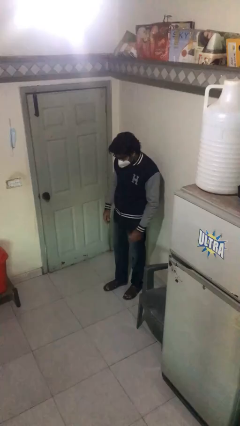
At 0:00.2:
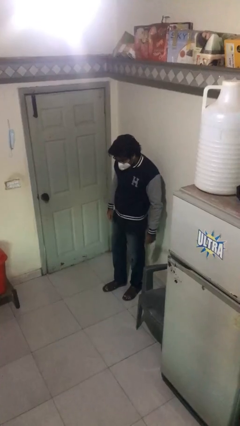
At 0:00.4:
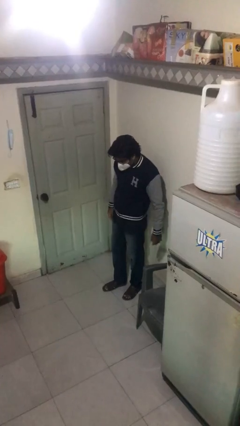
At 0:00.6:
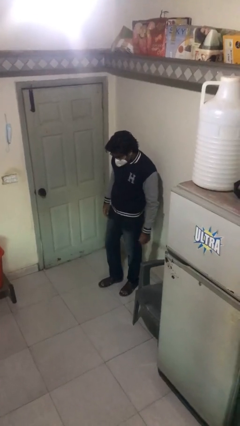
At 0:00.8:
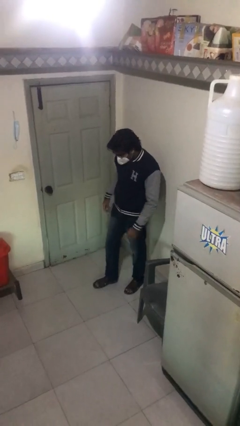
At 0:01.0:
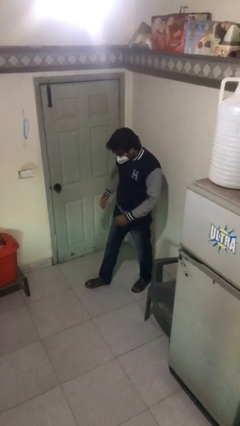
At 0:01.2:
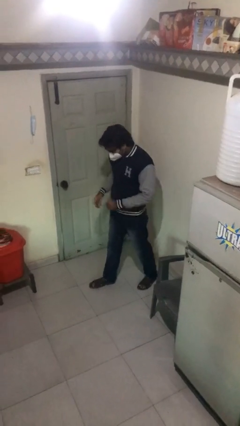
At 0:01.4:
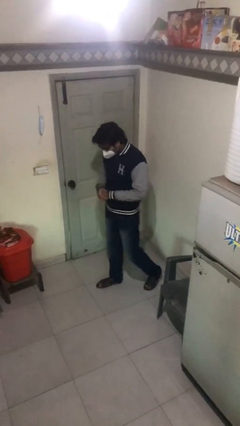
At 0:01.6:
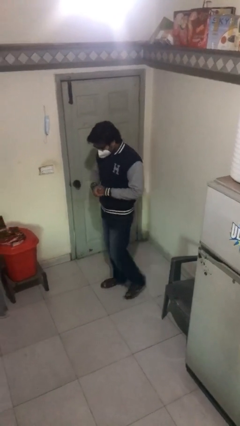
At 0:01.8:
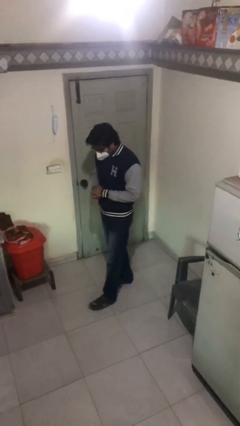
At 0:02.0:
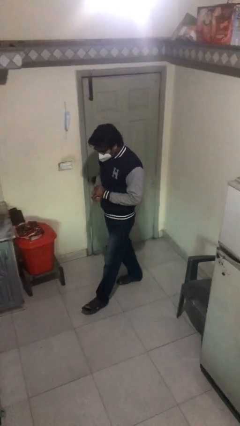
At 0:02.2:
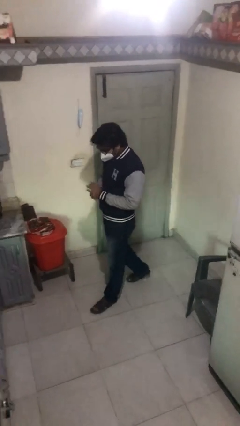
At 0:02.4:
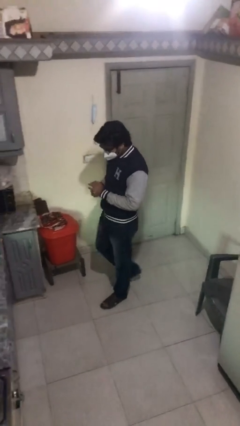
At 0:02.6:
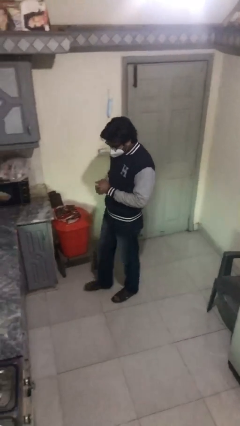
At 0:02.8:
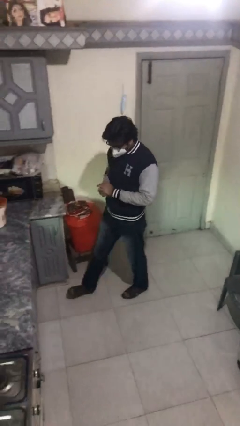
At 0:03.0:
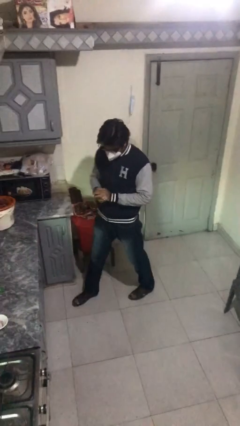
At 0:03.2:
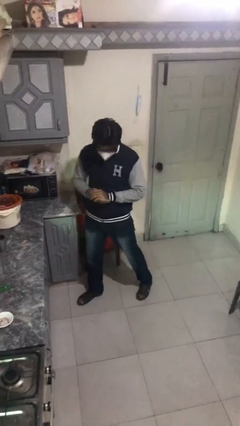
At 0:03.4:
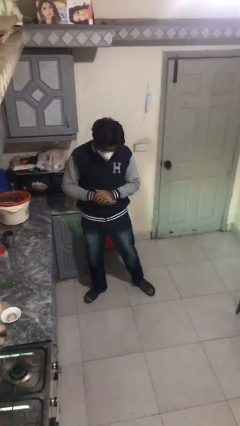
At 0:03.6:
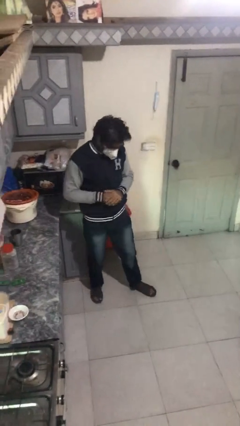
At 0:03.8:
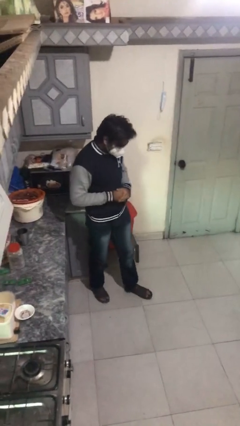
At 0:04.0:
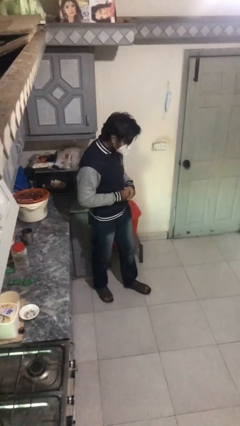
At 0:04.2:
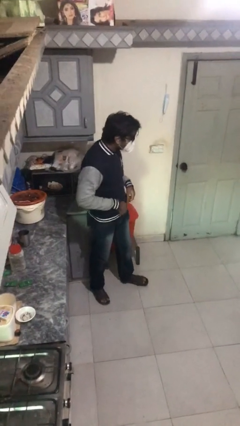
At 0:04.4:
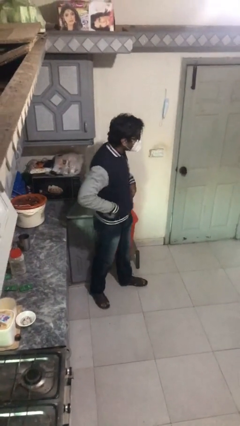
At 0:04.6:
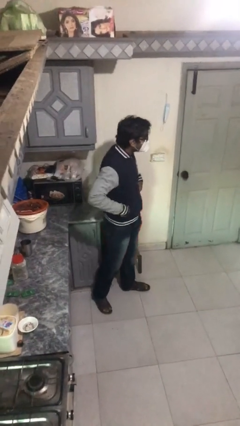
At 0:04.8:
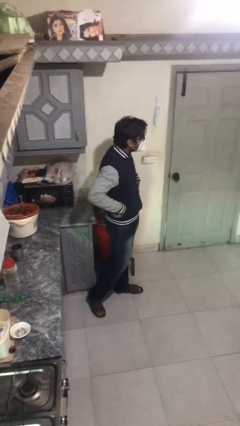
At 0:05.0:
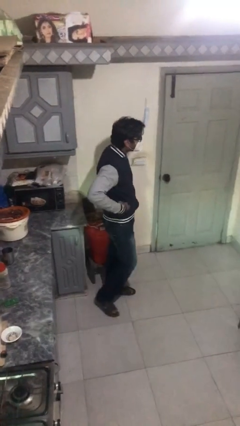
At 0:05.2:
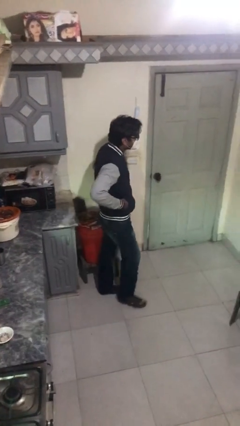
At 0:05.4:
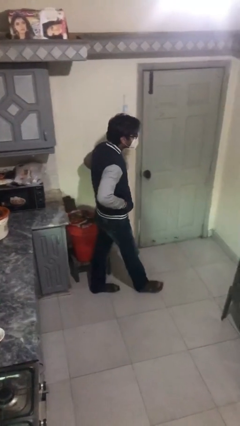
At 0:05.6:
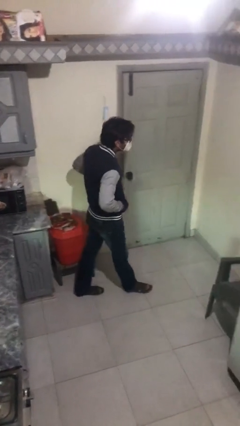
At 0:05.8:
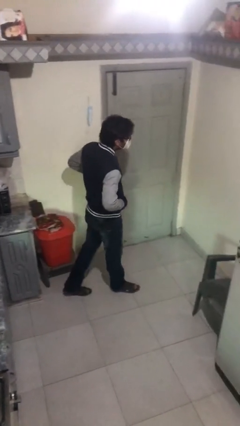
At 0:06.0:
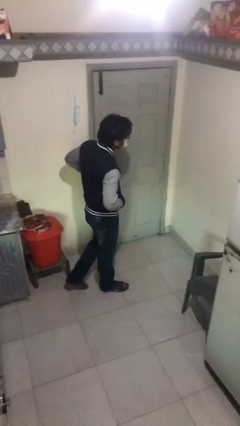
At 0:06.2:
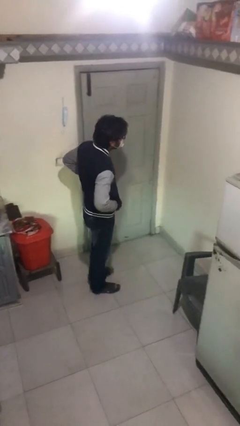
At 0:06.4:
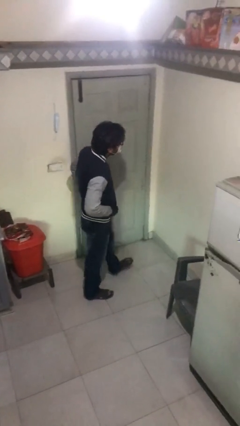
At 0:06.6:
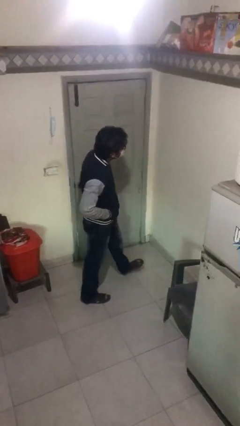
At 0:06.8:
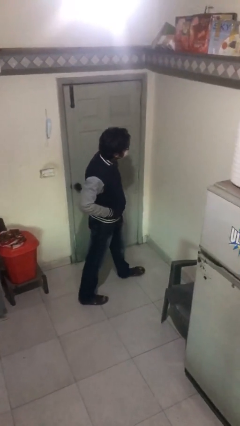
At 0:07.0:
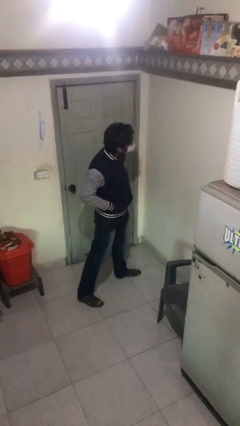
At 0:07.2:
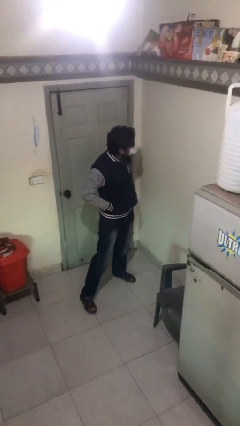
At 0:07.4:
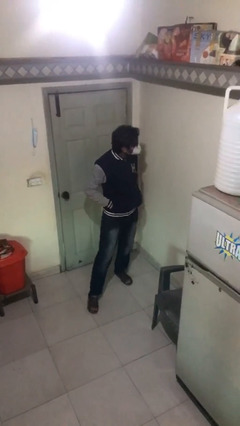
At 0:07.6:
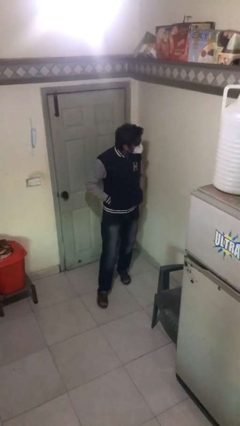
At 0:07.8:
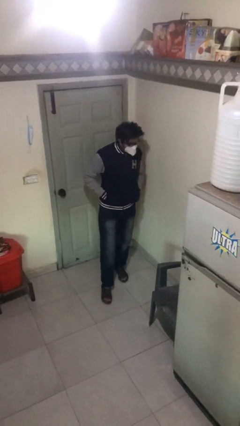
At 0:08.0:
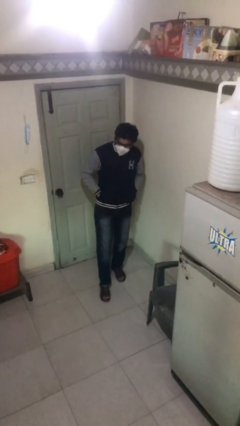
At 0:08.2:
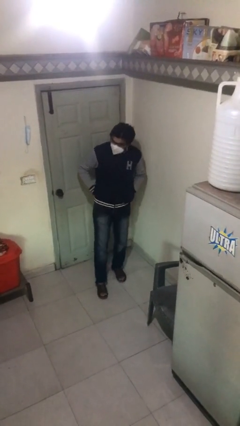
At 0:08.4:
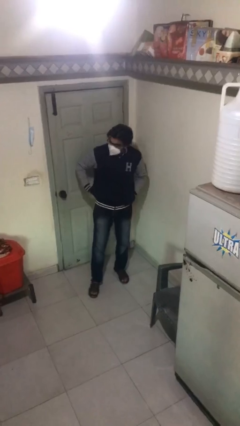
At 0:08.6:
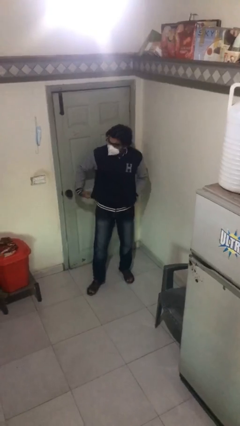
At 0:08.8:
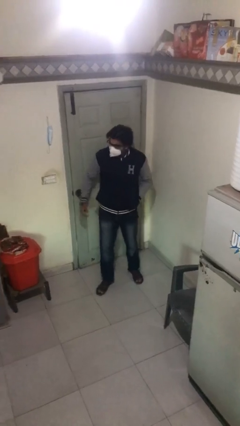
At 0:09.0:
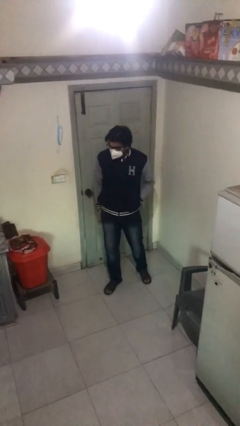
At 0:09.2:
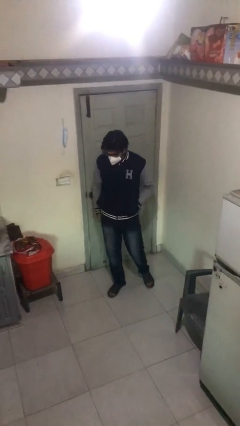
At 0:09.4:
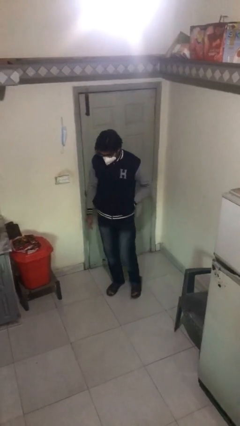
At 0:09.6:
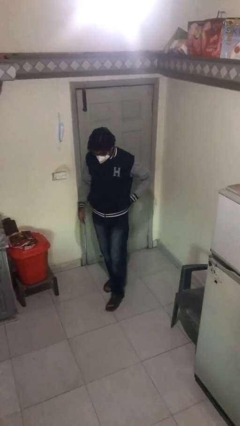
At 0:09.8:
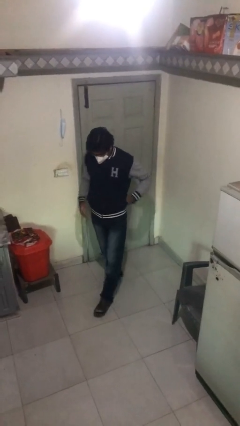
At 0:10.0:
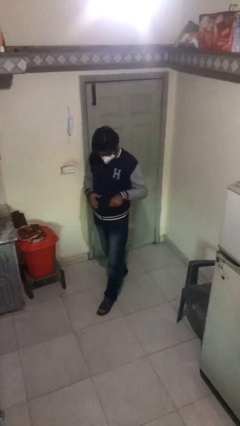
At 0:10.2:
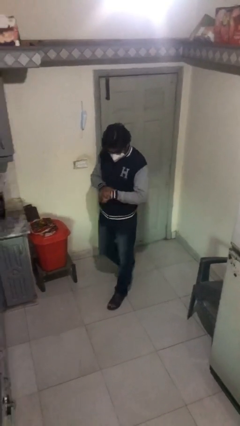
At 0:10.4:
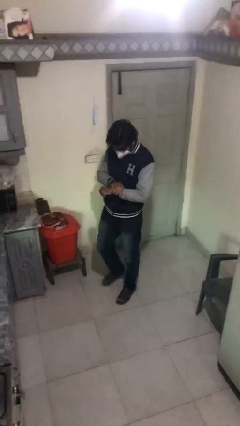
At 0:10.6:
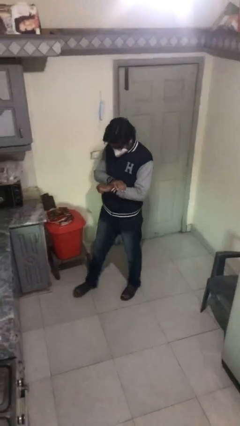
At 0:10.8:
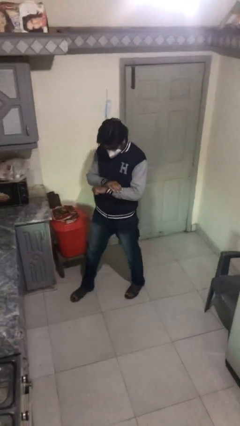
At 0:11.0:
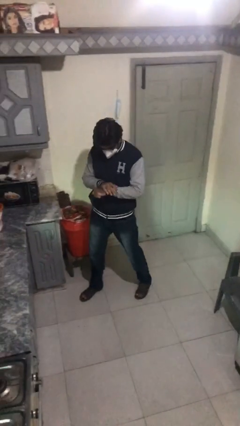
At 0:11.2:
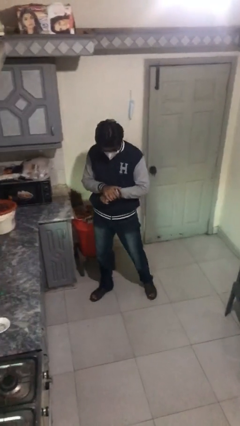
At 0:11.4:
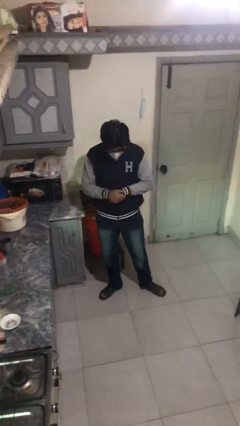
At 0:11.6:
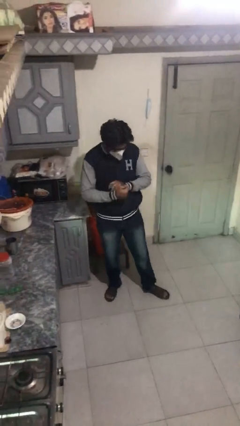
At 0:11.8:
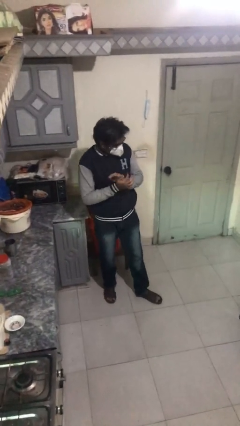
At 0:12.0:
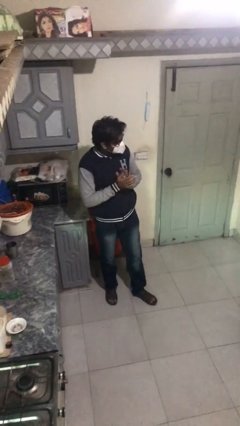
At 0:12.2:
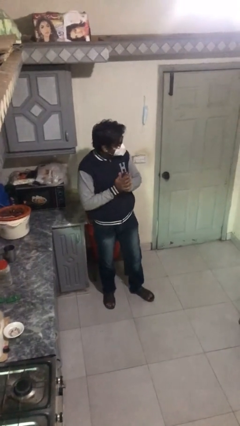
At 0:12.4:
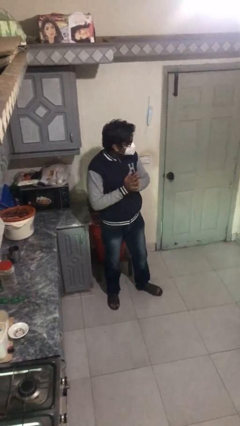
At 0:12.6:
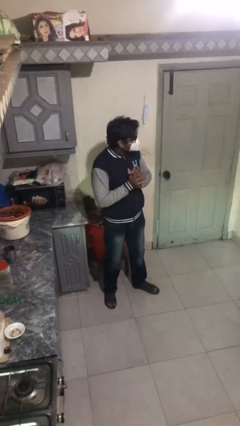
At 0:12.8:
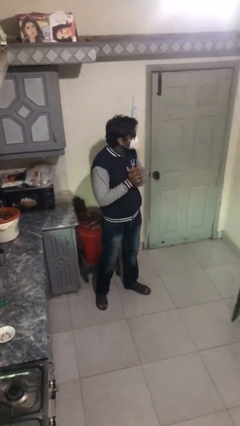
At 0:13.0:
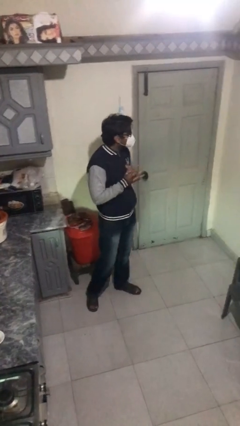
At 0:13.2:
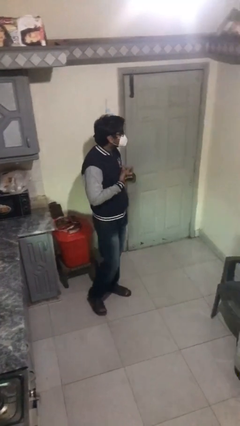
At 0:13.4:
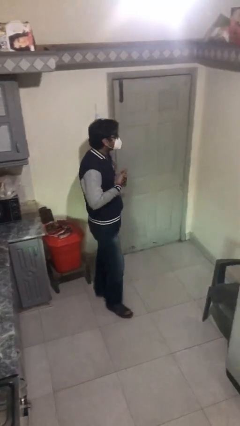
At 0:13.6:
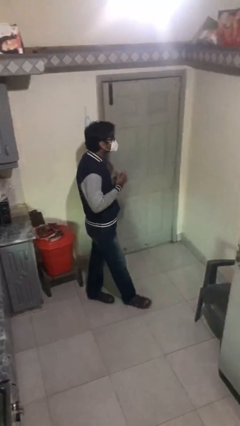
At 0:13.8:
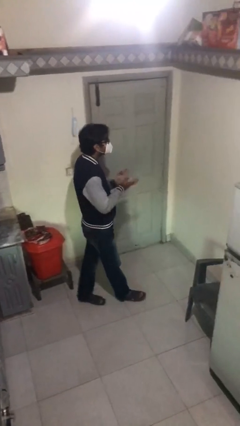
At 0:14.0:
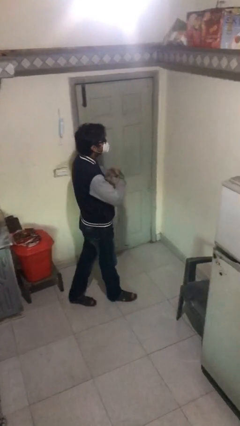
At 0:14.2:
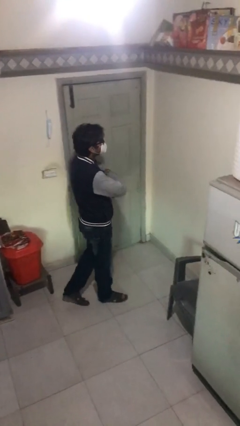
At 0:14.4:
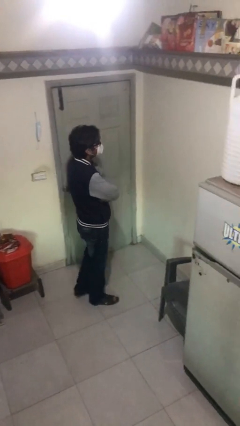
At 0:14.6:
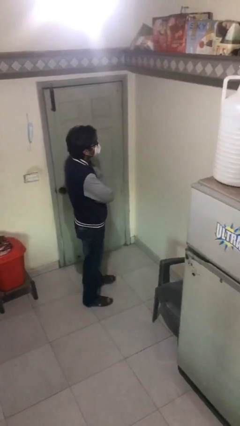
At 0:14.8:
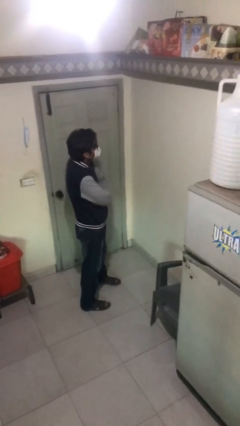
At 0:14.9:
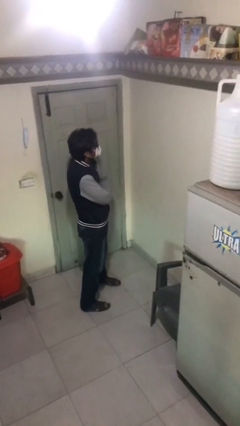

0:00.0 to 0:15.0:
person walks

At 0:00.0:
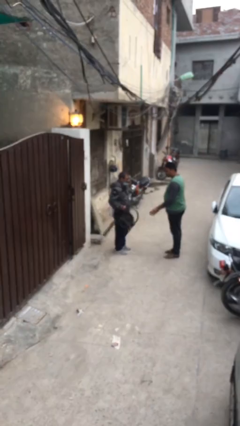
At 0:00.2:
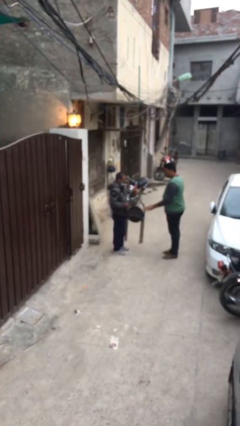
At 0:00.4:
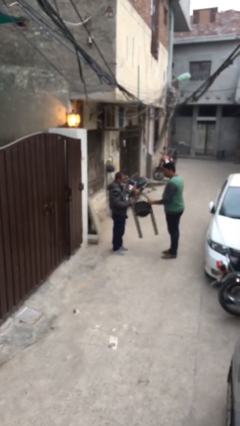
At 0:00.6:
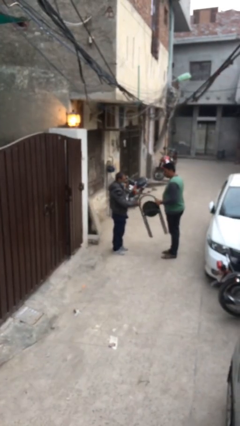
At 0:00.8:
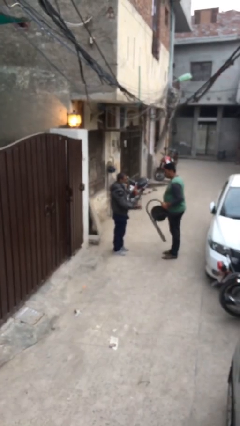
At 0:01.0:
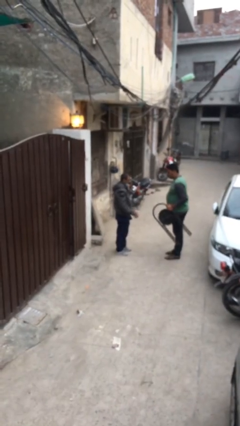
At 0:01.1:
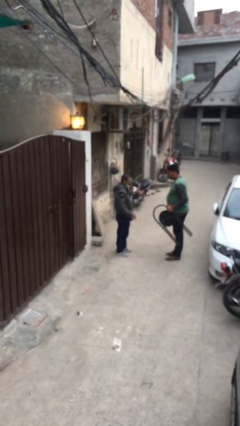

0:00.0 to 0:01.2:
person transfers object to person

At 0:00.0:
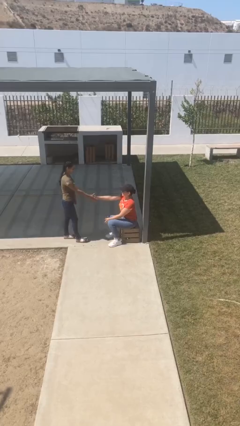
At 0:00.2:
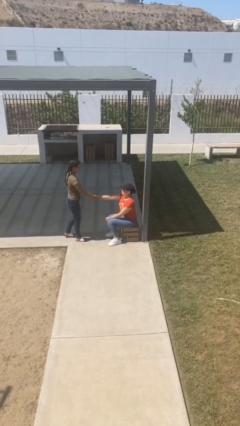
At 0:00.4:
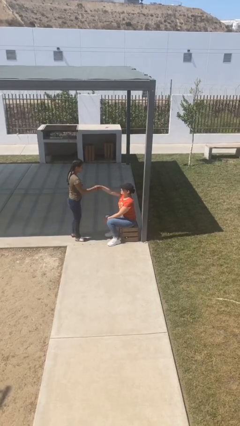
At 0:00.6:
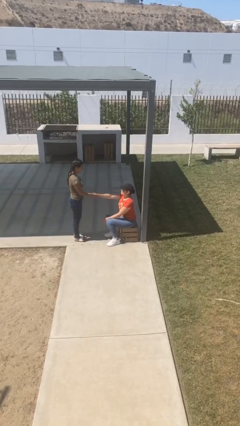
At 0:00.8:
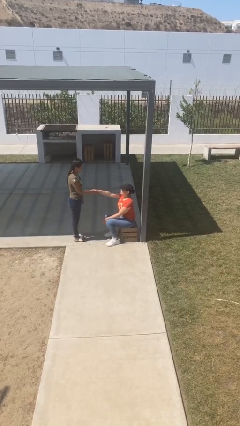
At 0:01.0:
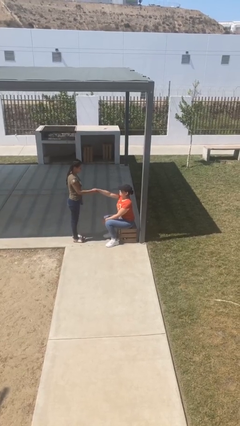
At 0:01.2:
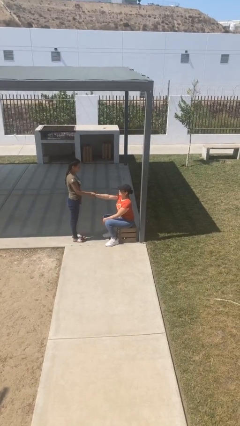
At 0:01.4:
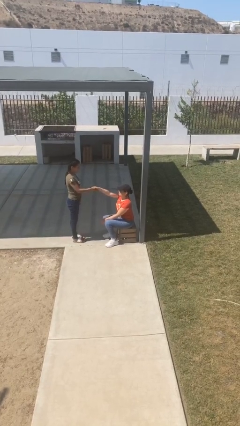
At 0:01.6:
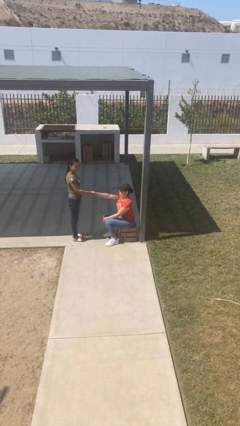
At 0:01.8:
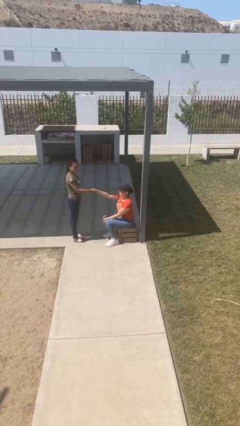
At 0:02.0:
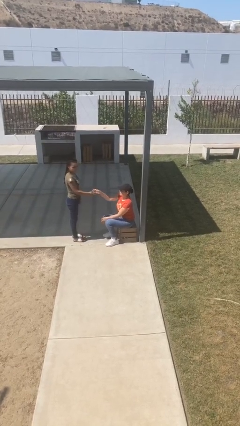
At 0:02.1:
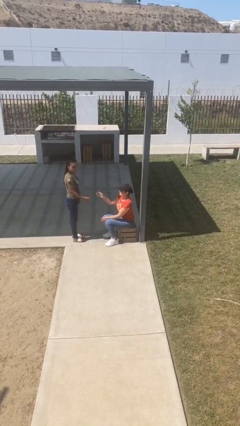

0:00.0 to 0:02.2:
person shakes hand
